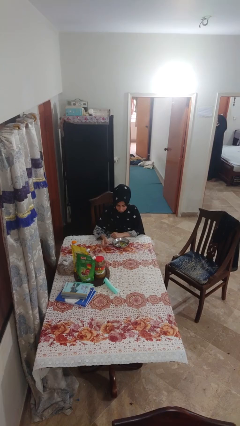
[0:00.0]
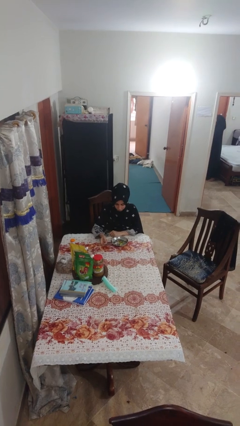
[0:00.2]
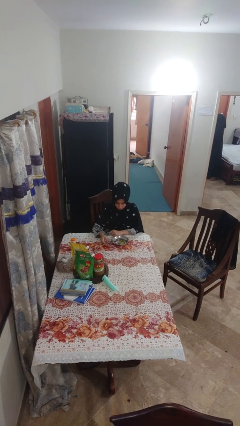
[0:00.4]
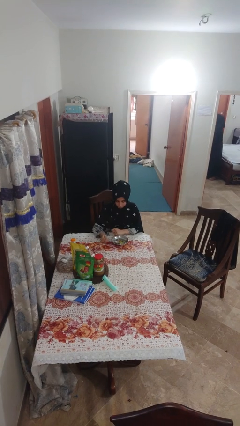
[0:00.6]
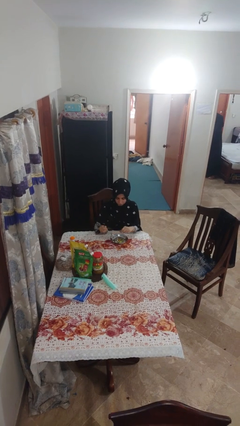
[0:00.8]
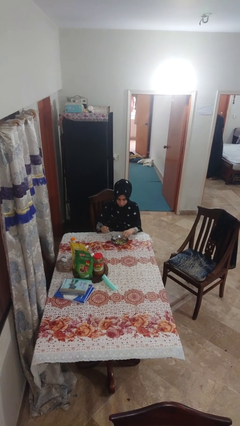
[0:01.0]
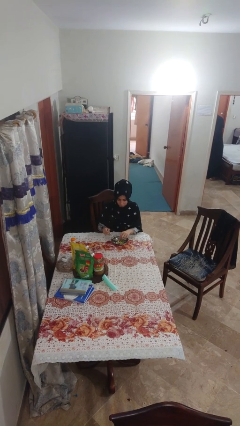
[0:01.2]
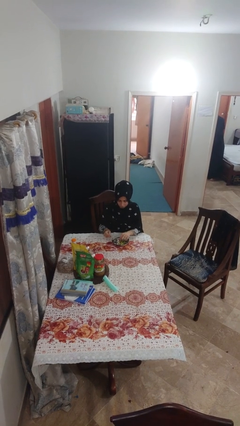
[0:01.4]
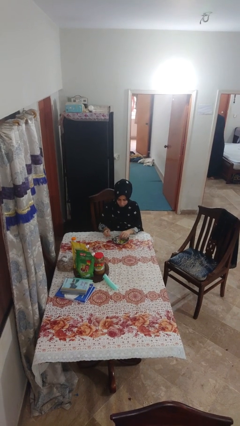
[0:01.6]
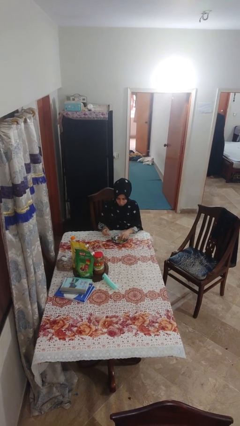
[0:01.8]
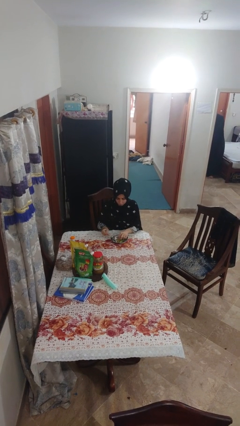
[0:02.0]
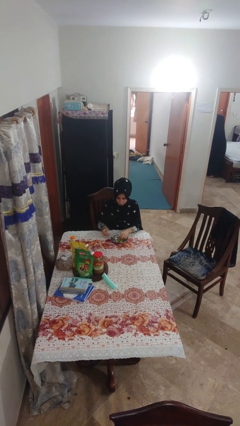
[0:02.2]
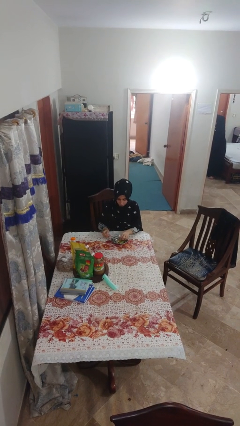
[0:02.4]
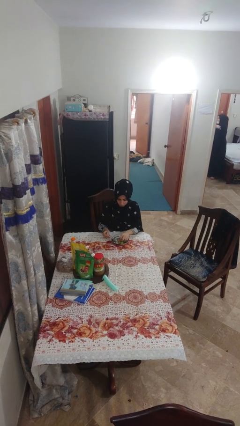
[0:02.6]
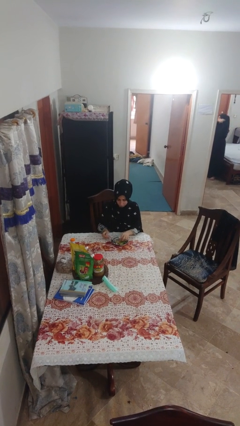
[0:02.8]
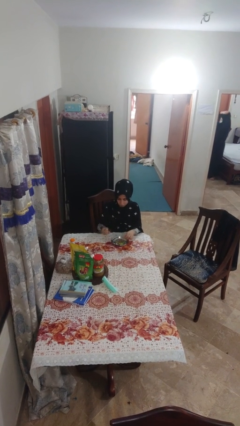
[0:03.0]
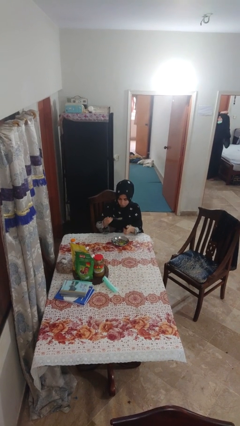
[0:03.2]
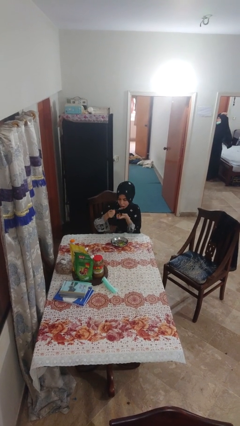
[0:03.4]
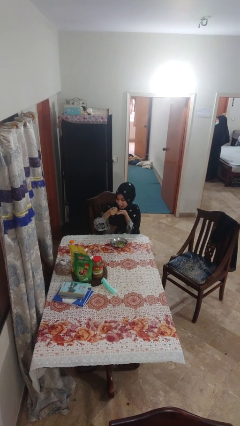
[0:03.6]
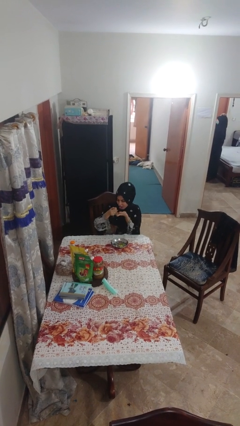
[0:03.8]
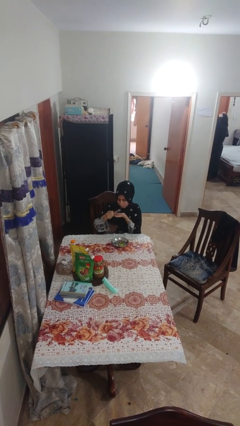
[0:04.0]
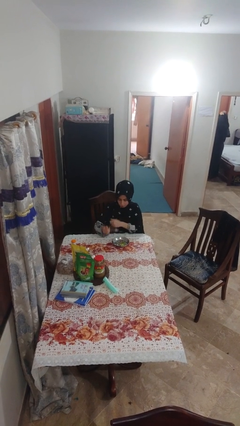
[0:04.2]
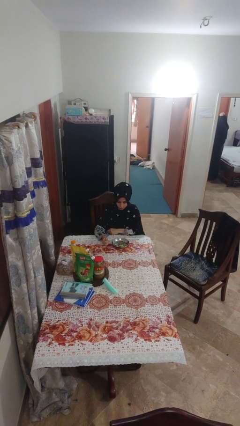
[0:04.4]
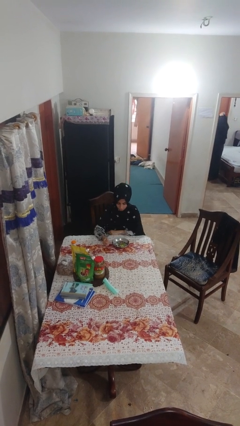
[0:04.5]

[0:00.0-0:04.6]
person eats with utensil

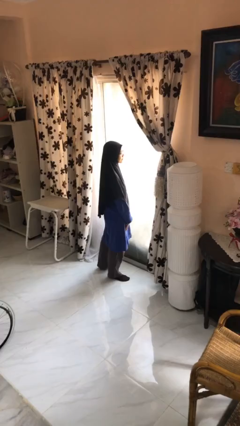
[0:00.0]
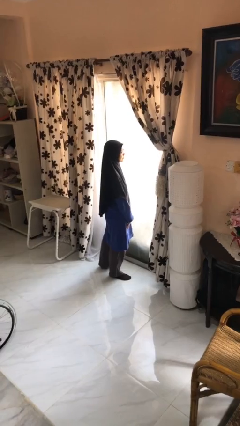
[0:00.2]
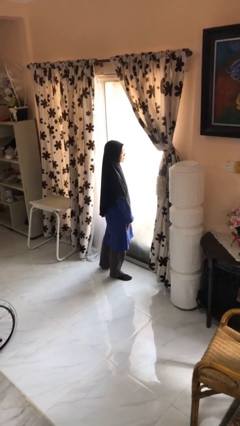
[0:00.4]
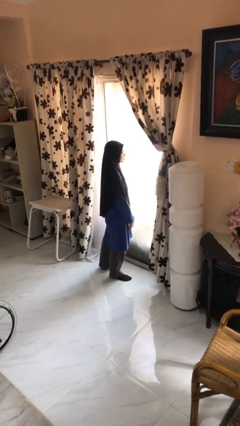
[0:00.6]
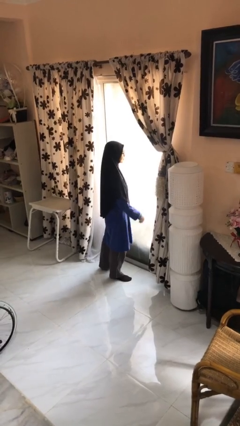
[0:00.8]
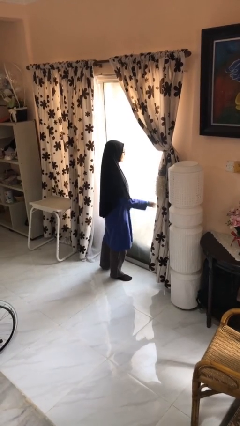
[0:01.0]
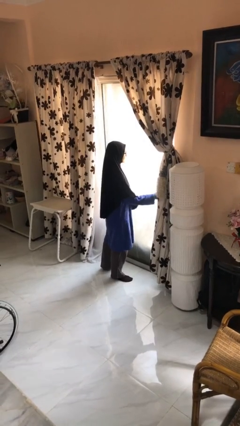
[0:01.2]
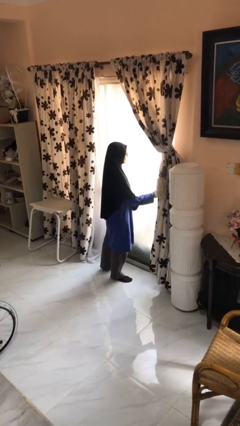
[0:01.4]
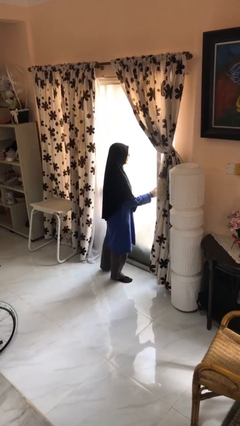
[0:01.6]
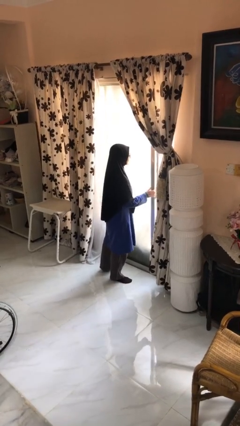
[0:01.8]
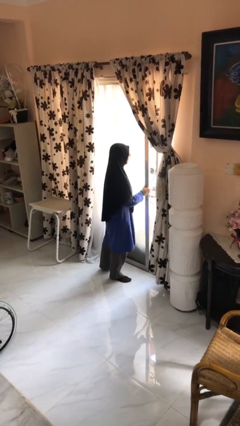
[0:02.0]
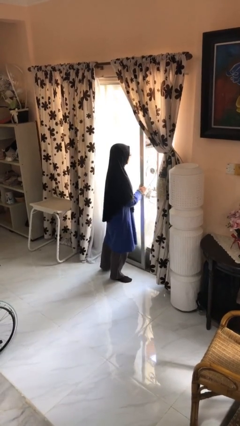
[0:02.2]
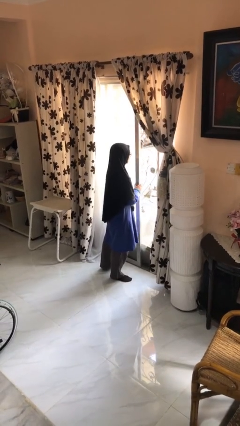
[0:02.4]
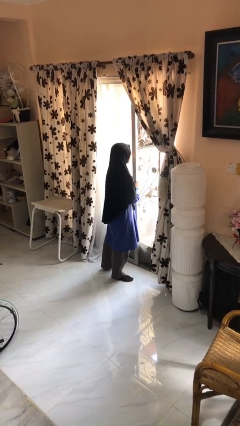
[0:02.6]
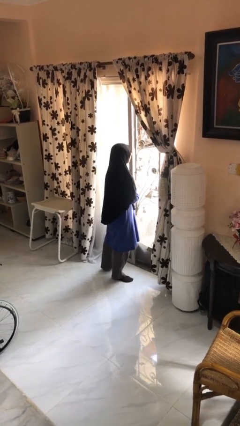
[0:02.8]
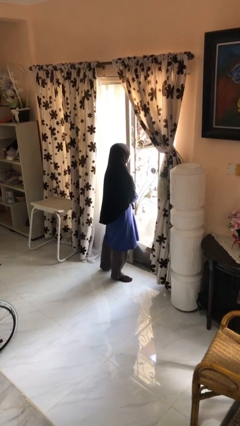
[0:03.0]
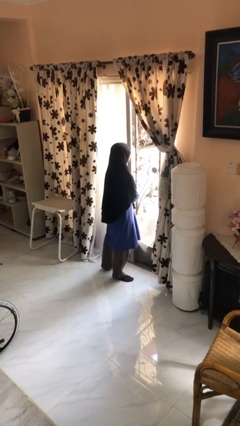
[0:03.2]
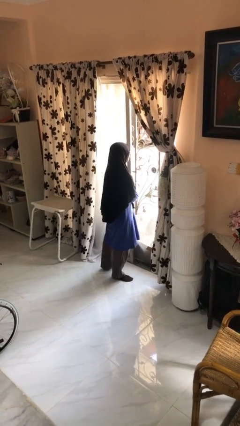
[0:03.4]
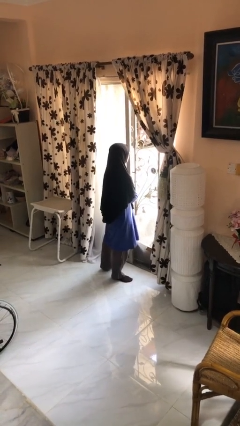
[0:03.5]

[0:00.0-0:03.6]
person opens sliding door

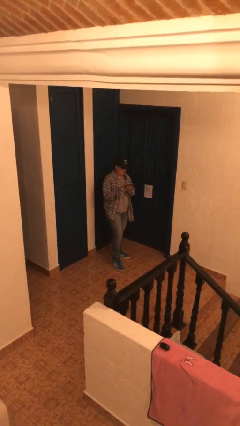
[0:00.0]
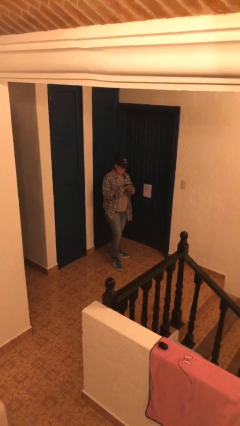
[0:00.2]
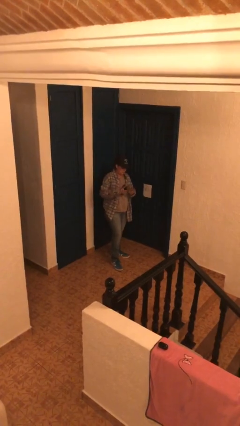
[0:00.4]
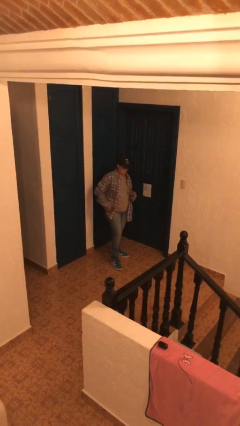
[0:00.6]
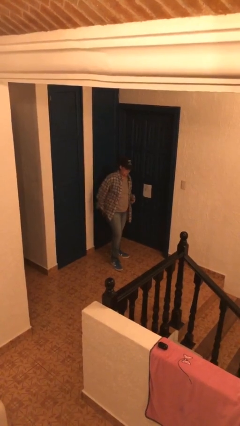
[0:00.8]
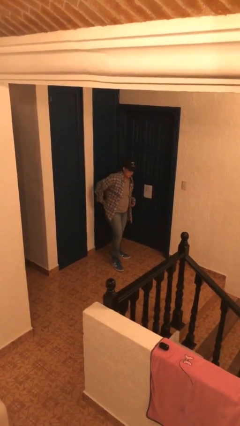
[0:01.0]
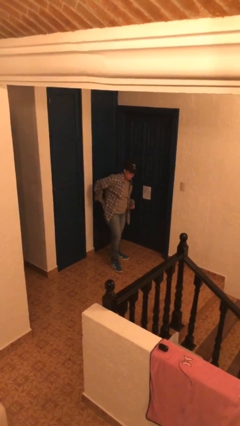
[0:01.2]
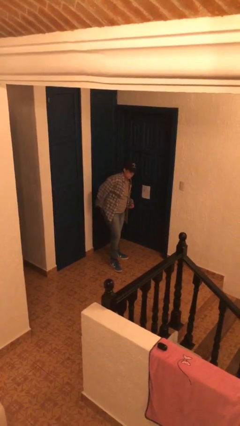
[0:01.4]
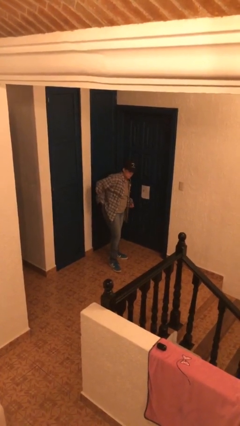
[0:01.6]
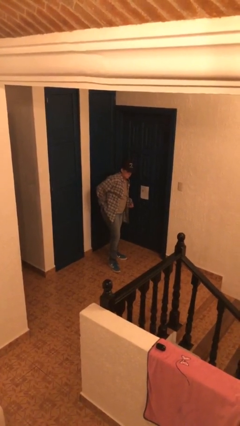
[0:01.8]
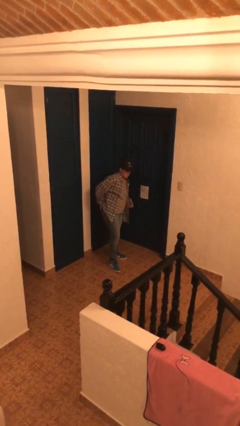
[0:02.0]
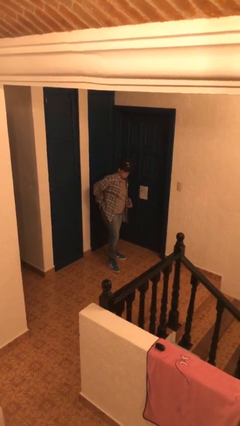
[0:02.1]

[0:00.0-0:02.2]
person puts phone into pocket

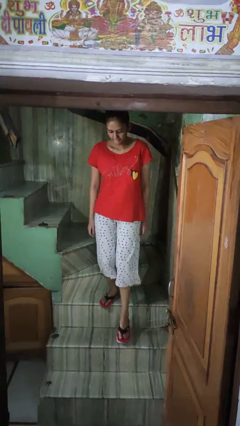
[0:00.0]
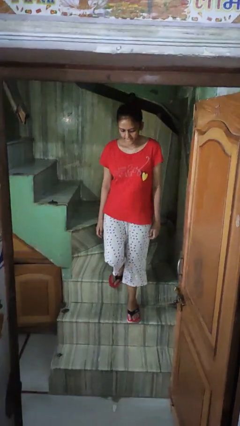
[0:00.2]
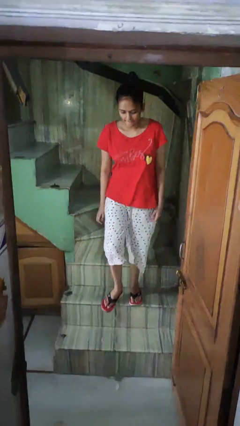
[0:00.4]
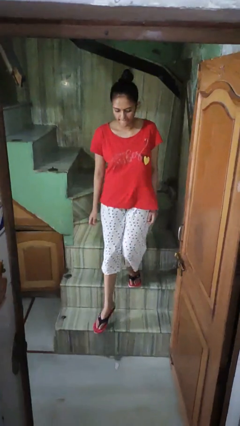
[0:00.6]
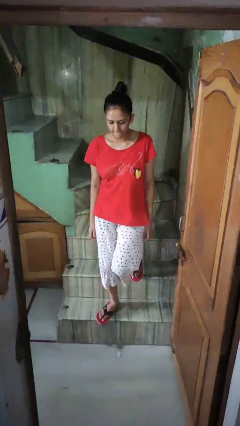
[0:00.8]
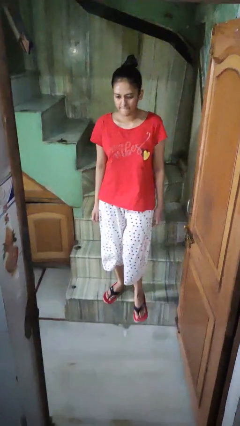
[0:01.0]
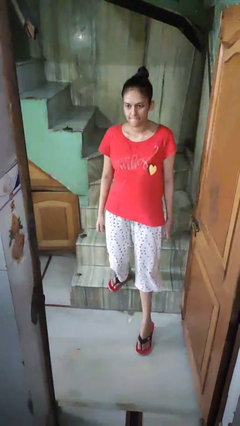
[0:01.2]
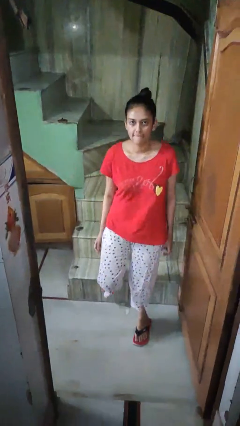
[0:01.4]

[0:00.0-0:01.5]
person climbs down stairs

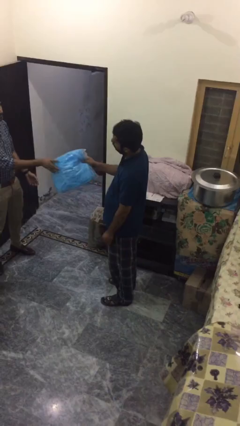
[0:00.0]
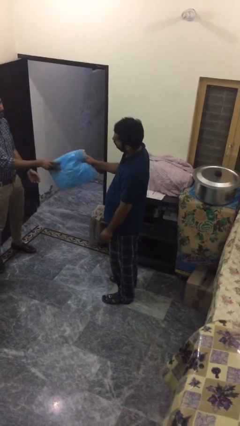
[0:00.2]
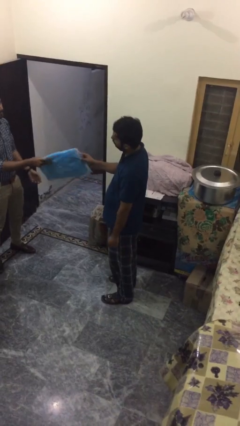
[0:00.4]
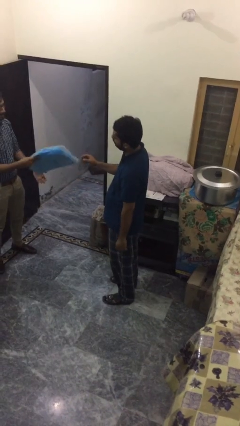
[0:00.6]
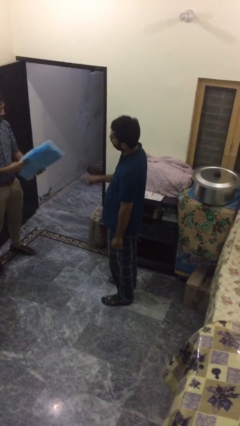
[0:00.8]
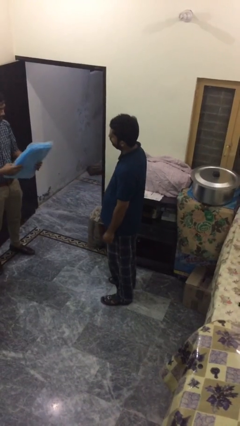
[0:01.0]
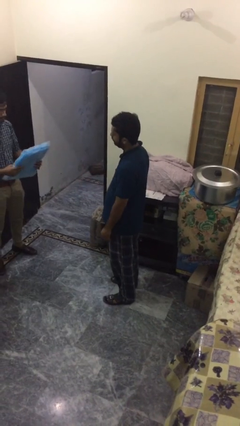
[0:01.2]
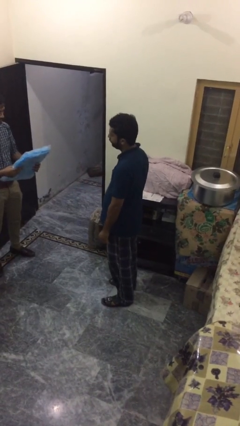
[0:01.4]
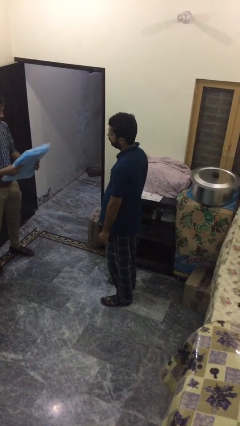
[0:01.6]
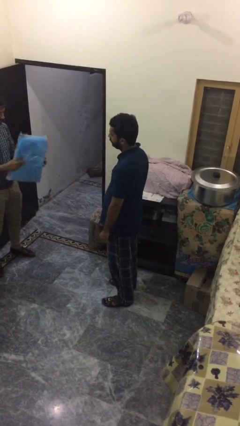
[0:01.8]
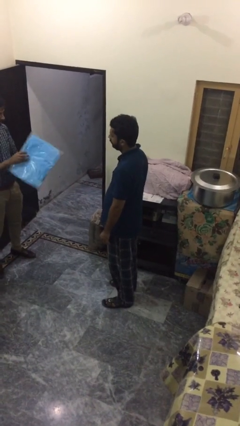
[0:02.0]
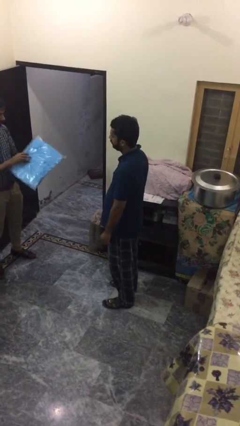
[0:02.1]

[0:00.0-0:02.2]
person transfers object to person

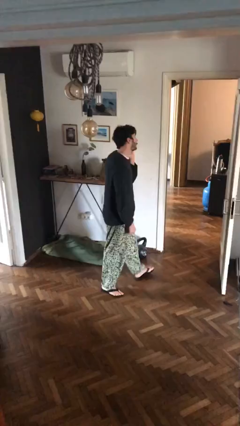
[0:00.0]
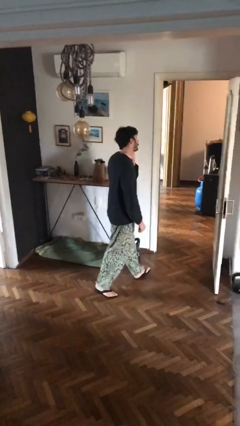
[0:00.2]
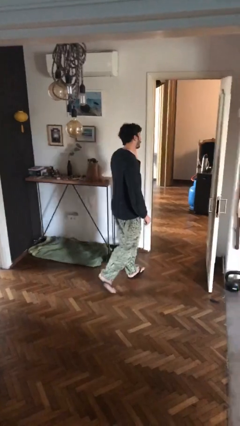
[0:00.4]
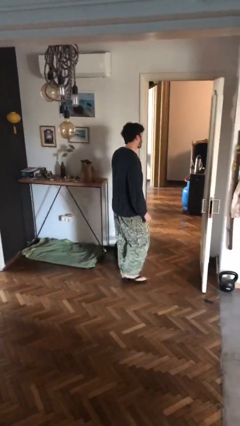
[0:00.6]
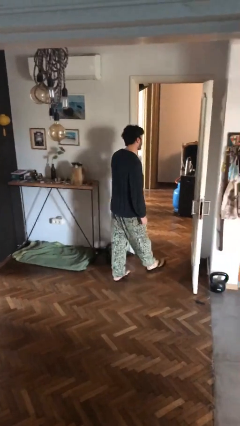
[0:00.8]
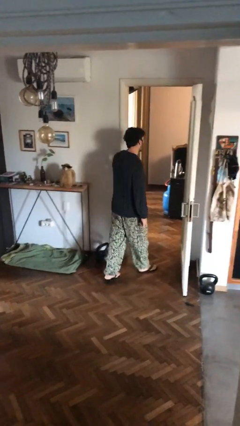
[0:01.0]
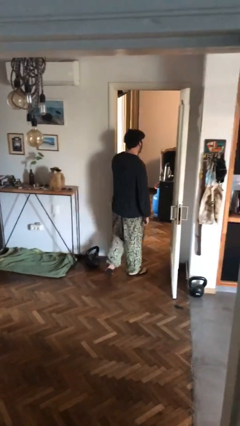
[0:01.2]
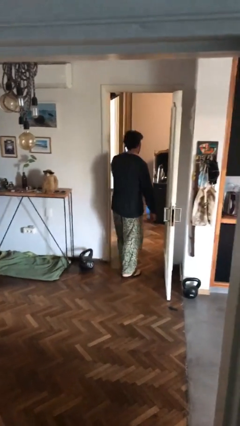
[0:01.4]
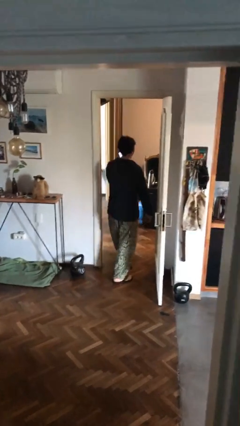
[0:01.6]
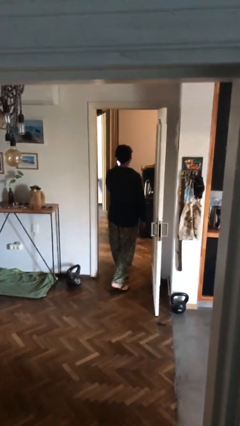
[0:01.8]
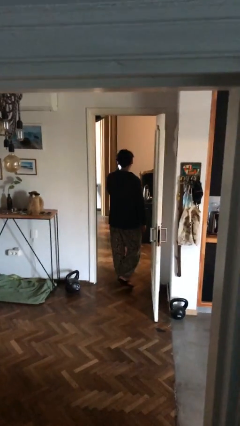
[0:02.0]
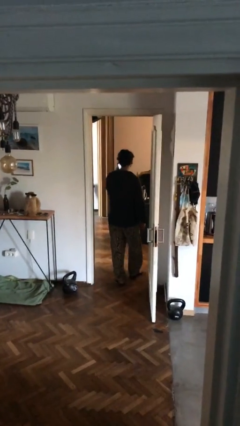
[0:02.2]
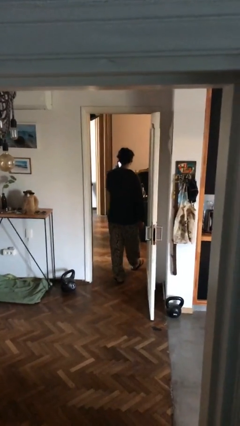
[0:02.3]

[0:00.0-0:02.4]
person exits scene through structure

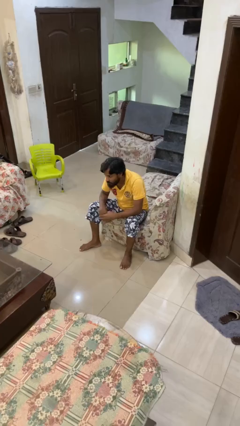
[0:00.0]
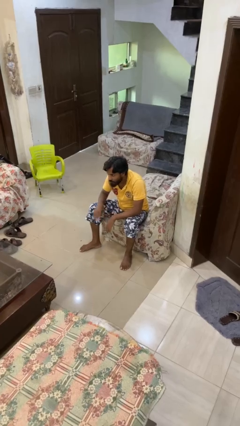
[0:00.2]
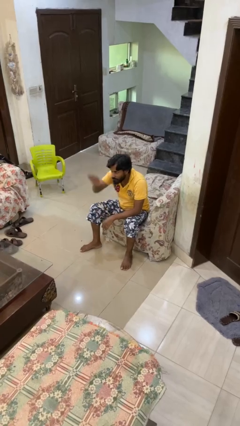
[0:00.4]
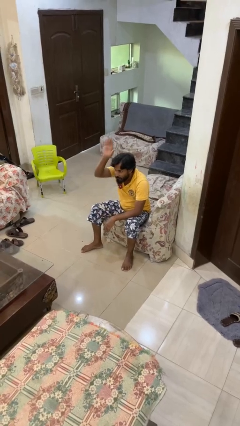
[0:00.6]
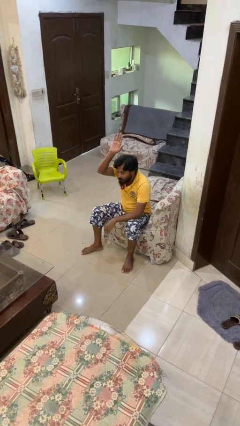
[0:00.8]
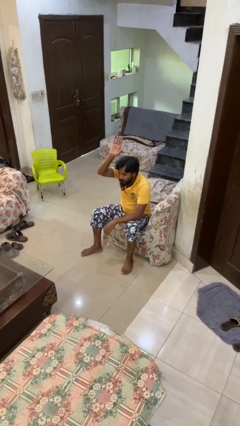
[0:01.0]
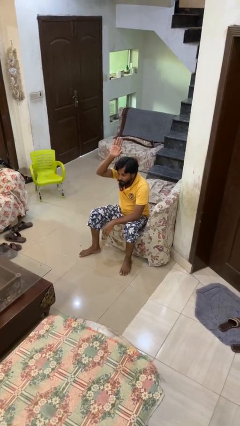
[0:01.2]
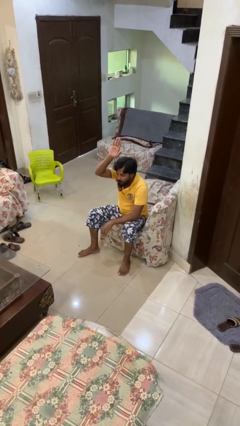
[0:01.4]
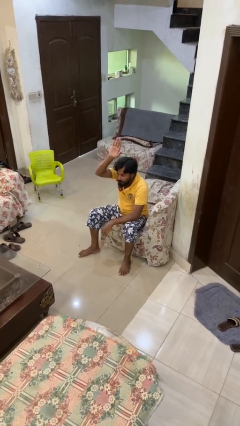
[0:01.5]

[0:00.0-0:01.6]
person gestures raise hand
